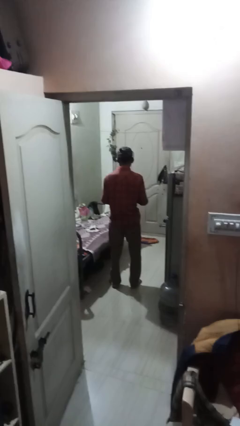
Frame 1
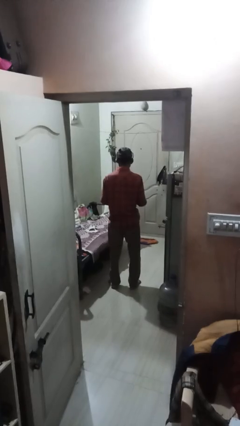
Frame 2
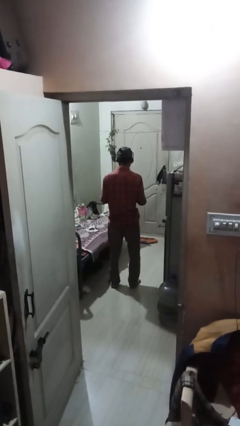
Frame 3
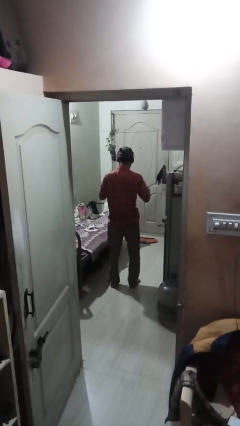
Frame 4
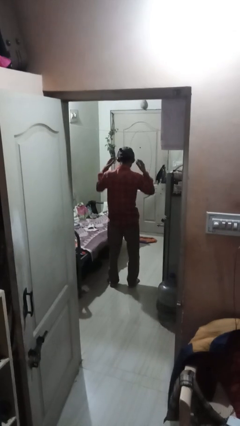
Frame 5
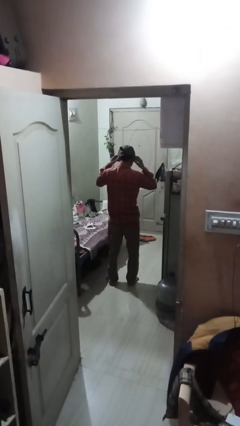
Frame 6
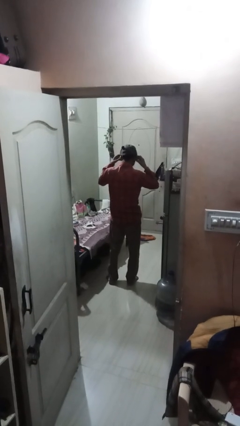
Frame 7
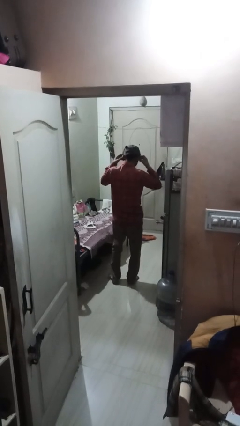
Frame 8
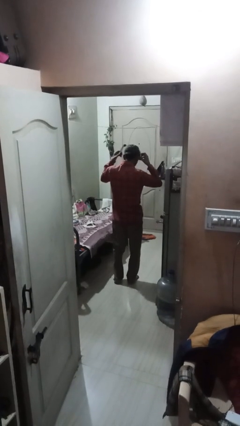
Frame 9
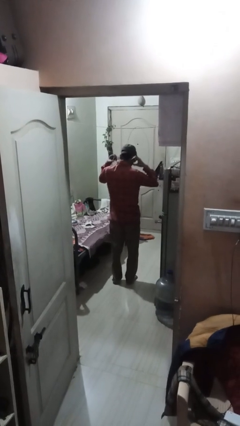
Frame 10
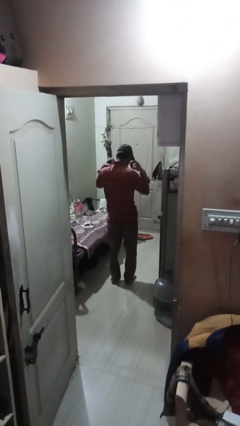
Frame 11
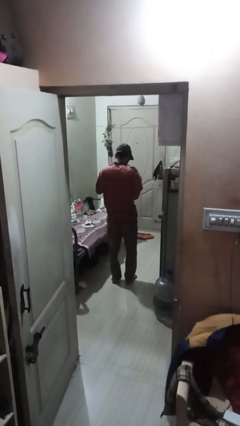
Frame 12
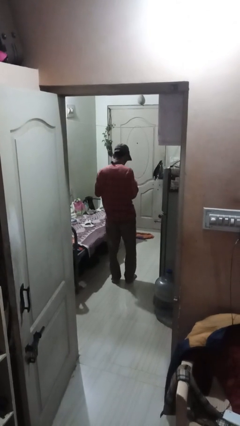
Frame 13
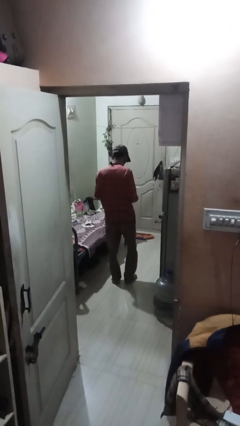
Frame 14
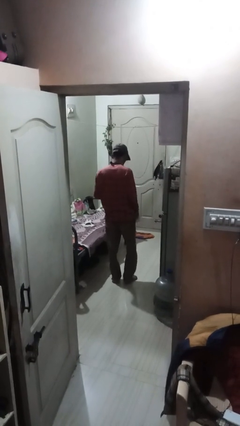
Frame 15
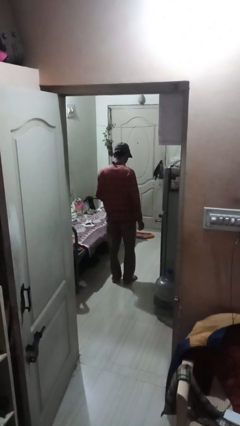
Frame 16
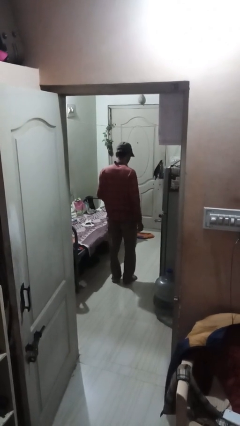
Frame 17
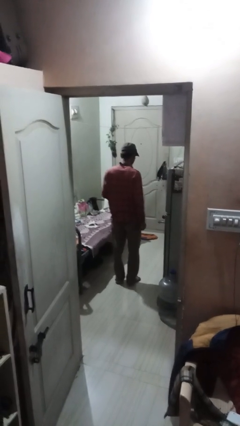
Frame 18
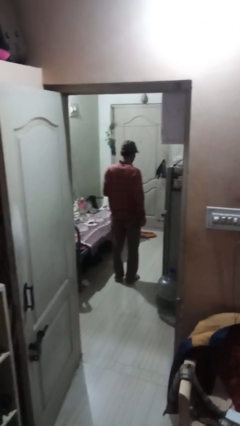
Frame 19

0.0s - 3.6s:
person takes off headphones

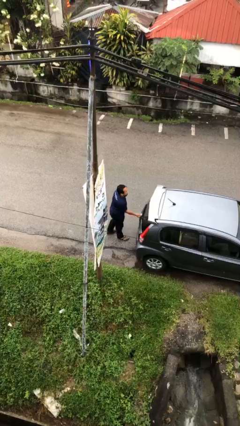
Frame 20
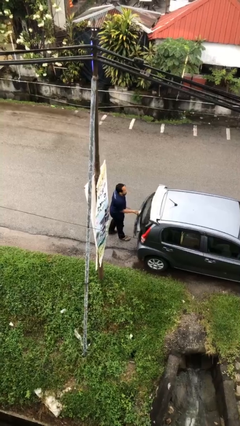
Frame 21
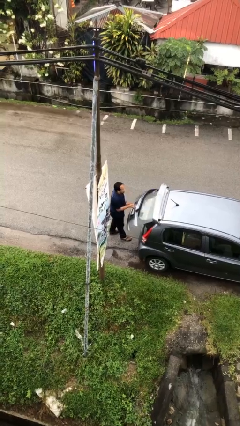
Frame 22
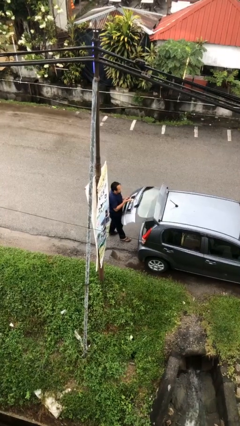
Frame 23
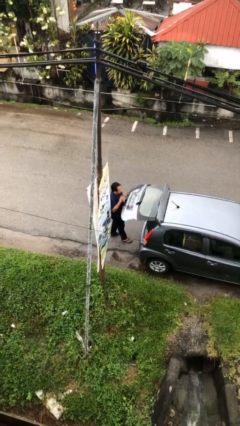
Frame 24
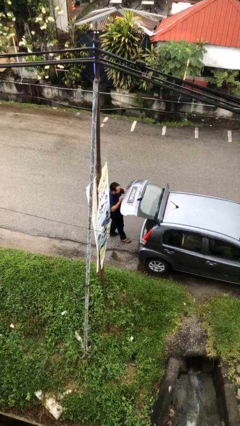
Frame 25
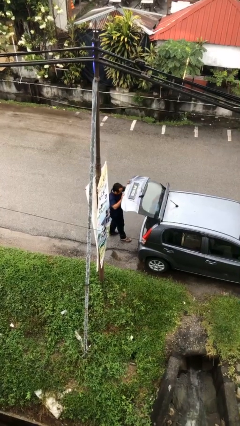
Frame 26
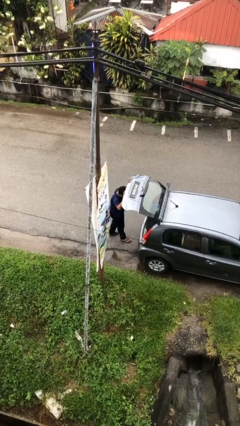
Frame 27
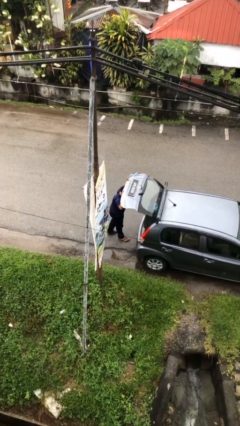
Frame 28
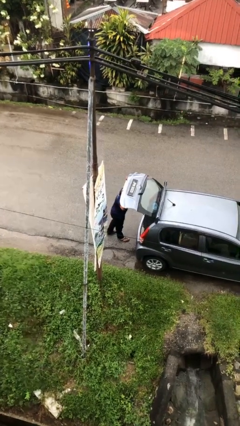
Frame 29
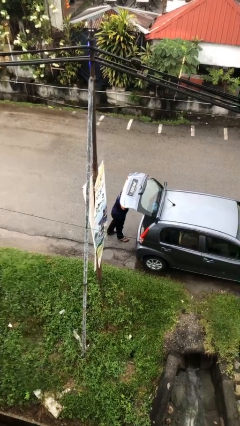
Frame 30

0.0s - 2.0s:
person opens car trunk

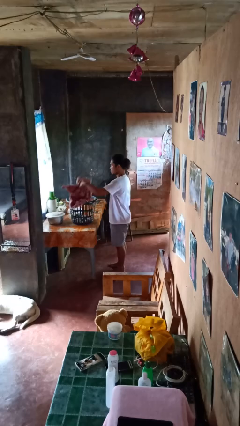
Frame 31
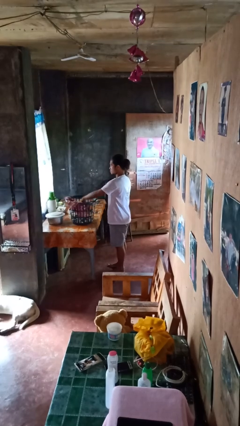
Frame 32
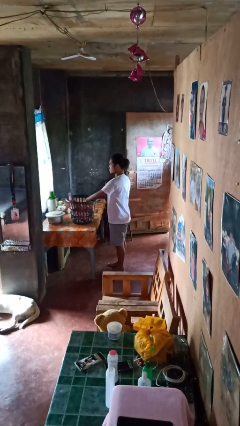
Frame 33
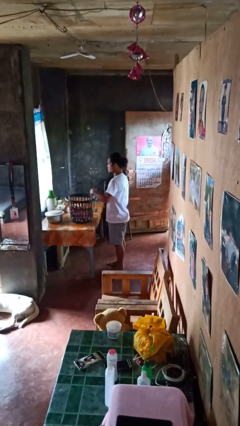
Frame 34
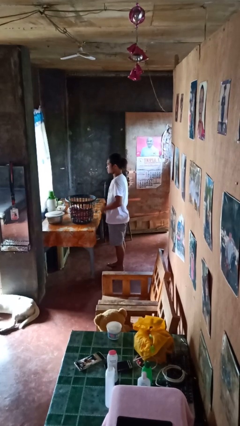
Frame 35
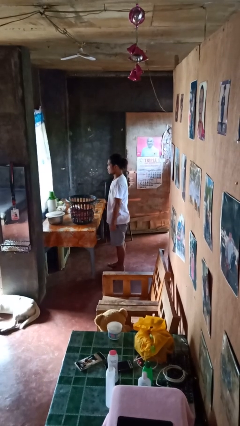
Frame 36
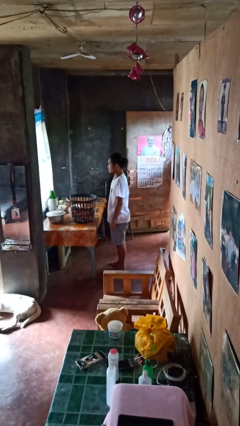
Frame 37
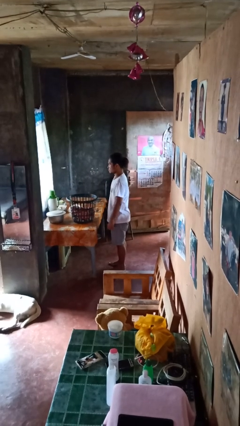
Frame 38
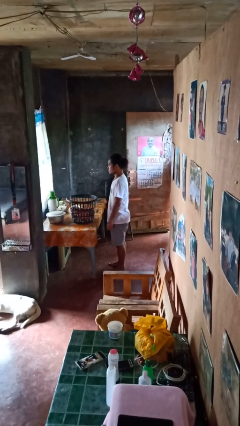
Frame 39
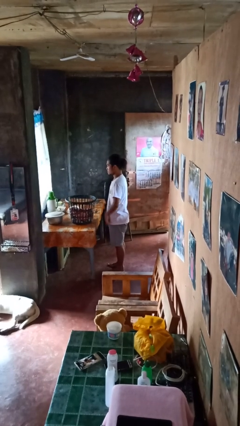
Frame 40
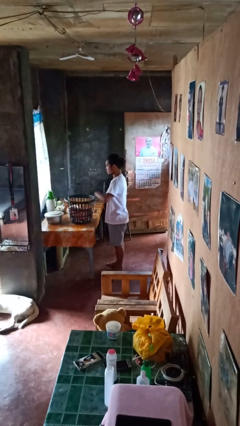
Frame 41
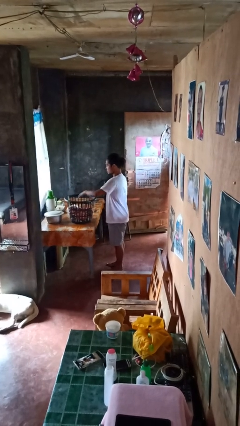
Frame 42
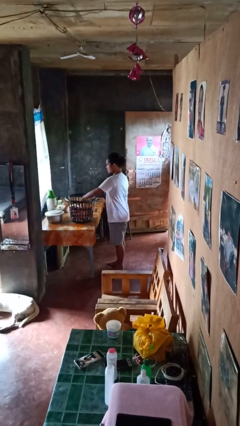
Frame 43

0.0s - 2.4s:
person puts object into basket

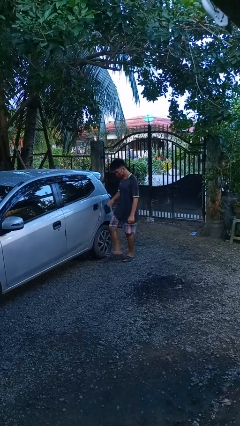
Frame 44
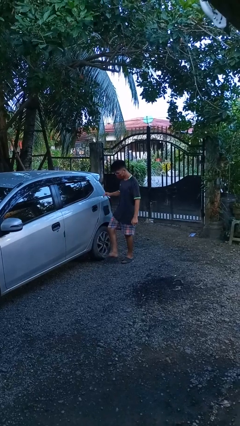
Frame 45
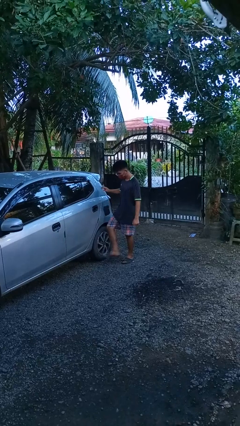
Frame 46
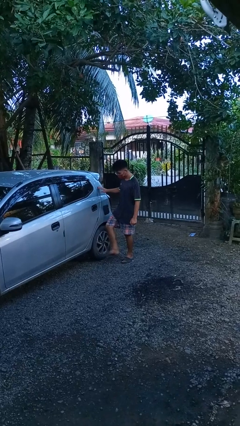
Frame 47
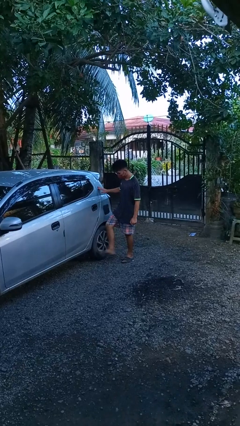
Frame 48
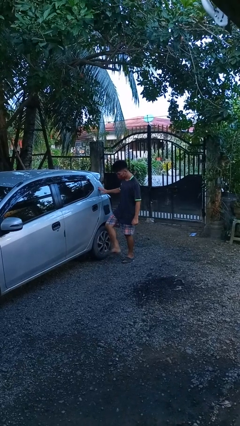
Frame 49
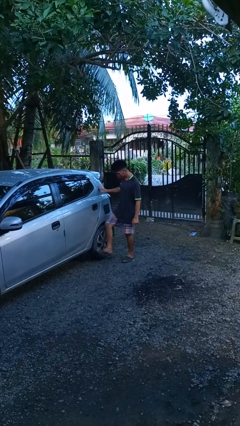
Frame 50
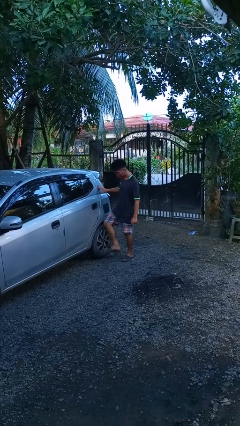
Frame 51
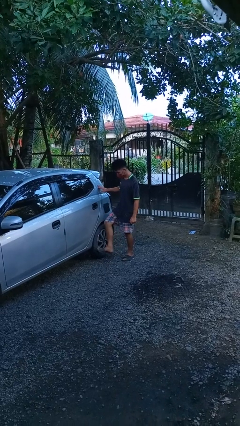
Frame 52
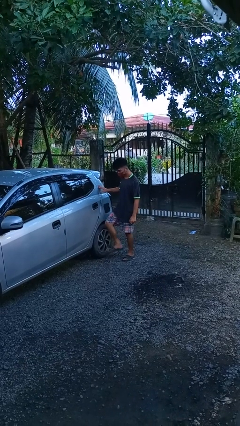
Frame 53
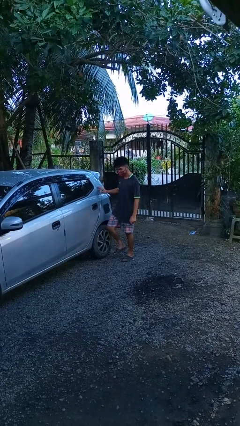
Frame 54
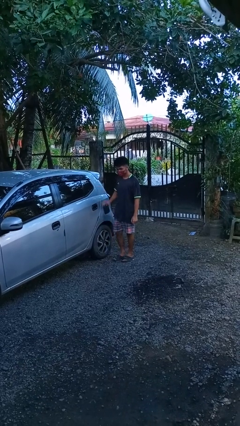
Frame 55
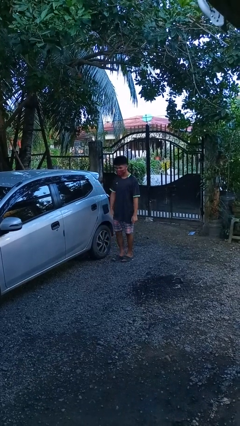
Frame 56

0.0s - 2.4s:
person kicks car tires

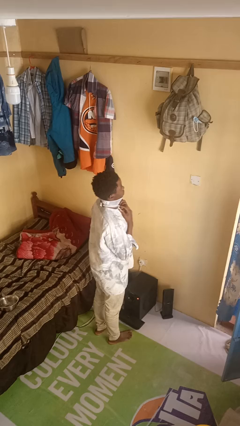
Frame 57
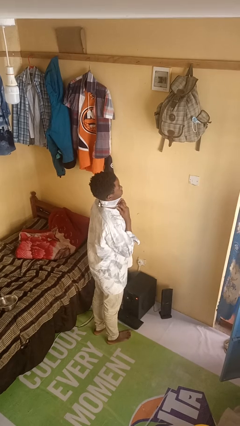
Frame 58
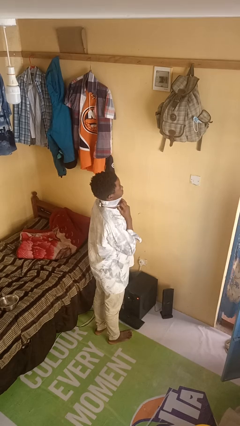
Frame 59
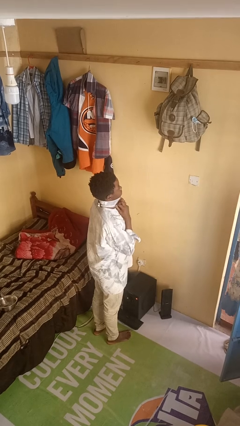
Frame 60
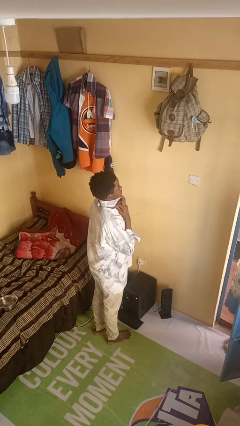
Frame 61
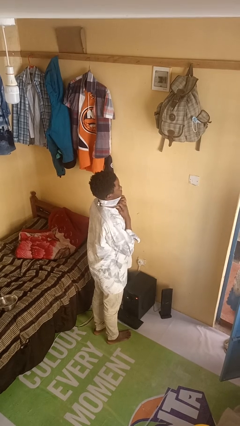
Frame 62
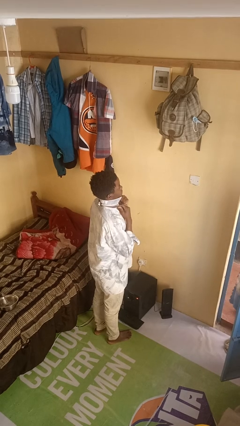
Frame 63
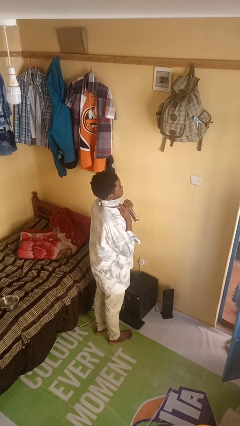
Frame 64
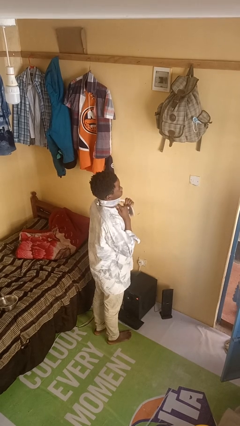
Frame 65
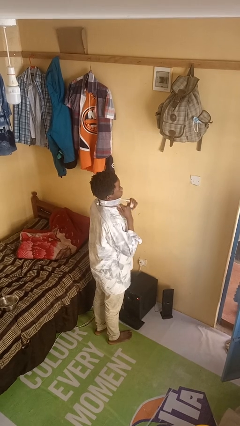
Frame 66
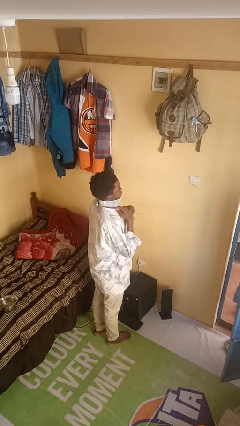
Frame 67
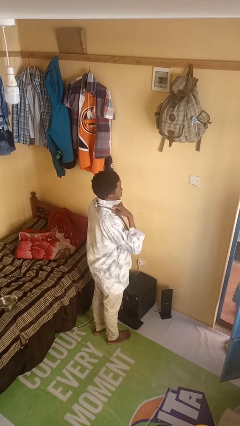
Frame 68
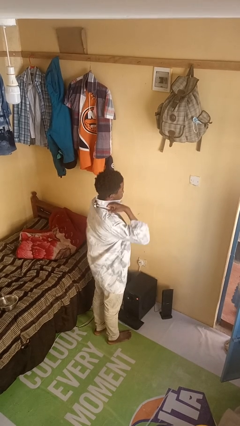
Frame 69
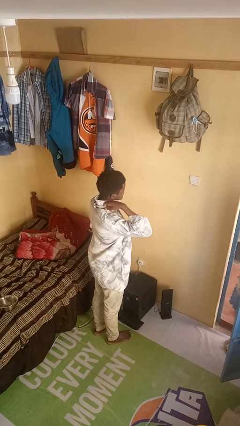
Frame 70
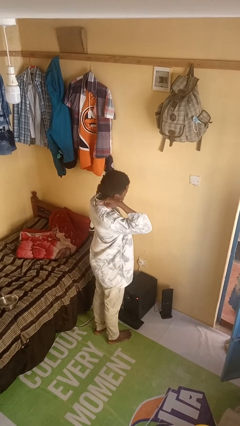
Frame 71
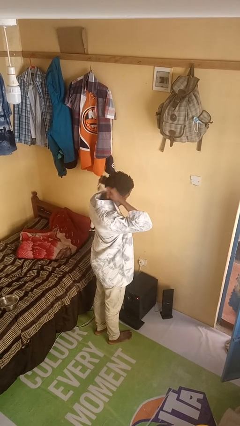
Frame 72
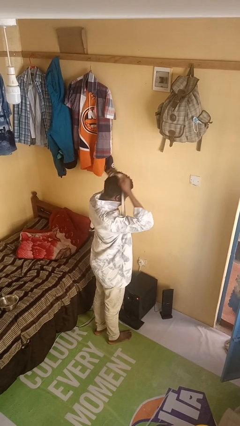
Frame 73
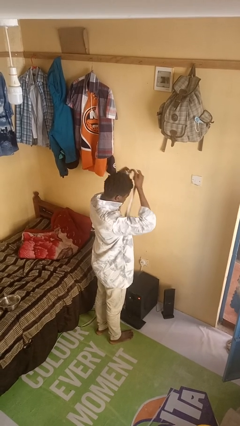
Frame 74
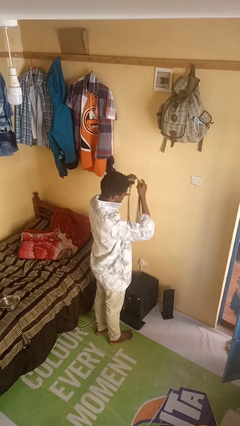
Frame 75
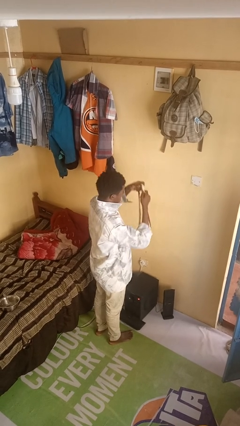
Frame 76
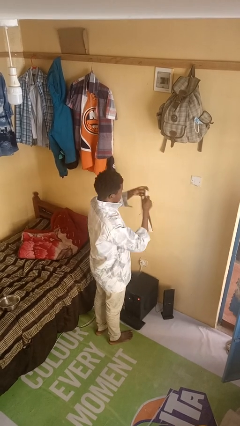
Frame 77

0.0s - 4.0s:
person takes off necktie

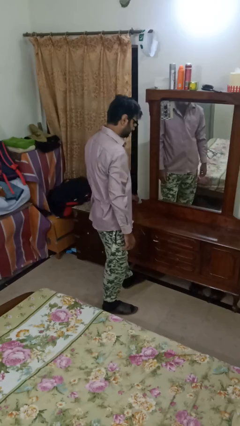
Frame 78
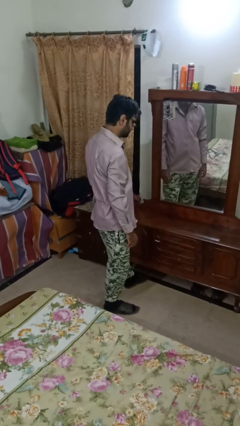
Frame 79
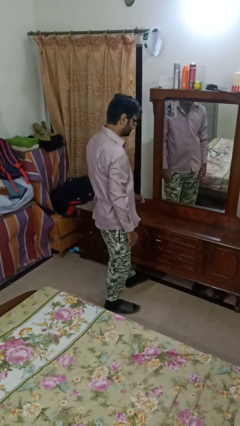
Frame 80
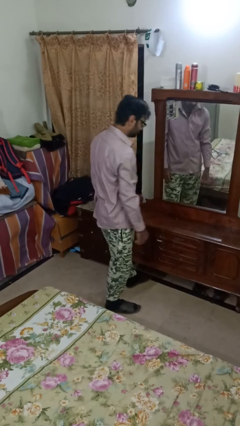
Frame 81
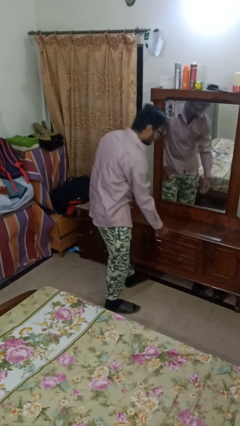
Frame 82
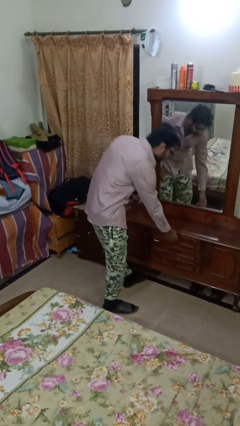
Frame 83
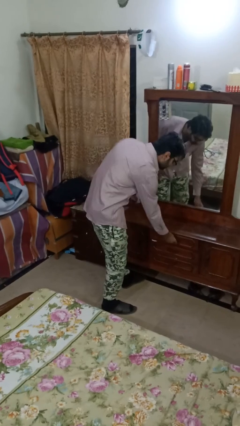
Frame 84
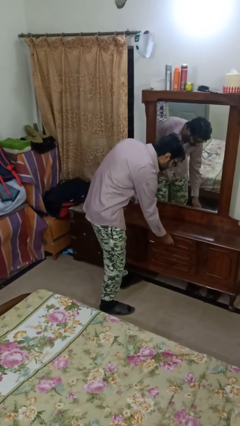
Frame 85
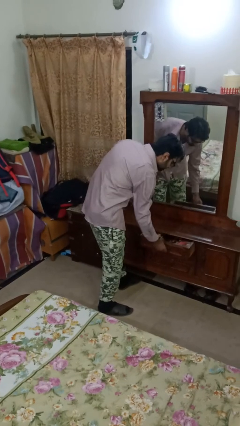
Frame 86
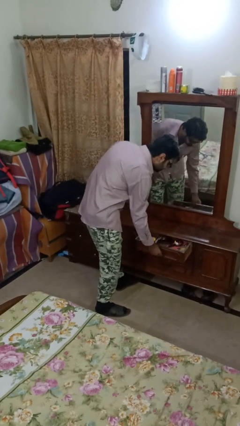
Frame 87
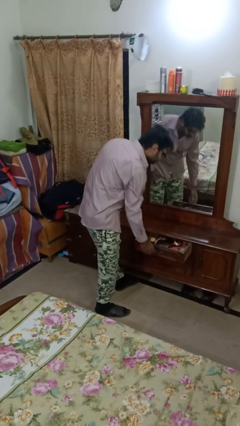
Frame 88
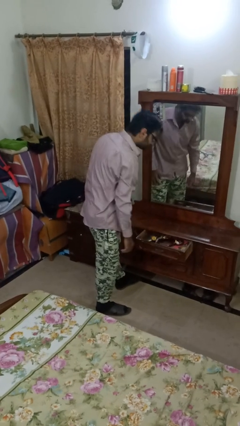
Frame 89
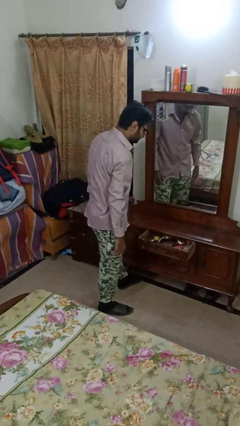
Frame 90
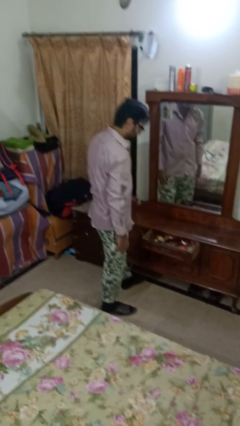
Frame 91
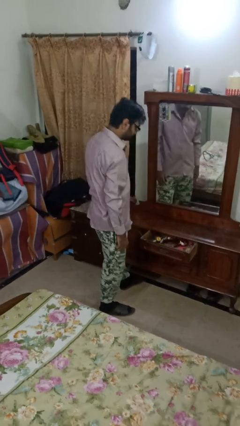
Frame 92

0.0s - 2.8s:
person opens dresser drawer

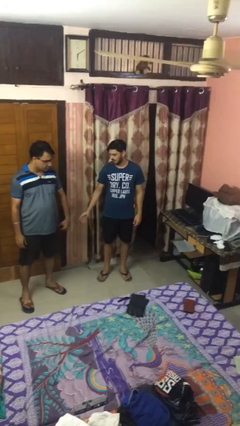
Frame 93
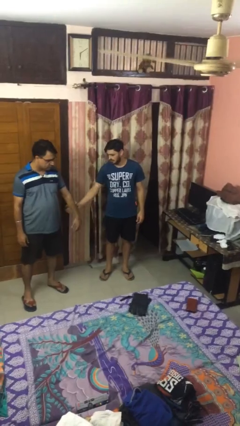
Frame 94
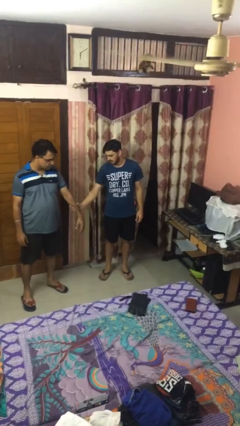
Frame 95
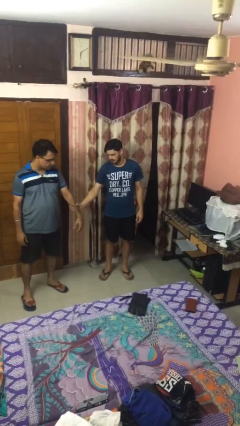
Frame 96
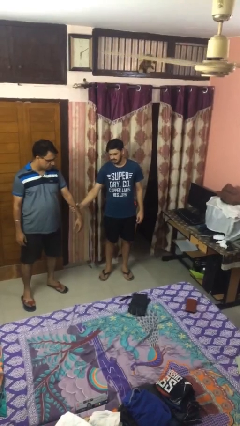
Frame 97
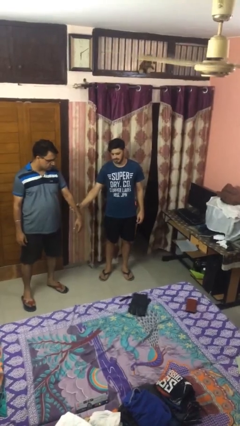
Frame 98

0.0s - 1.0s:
person grabs person by forearm
